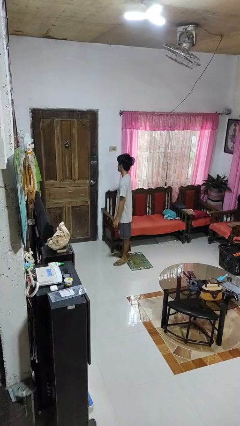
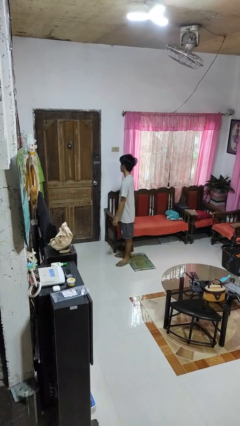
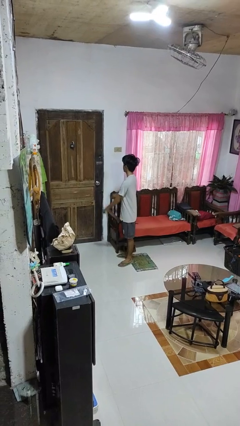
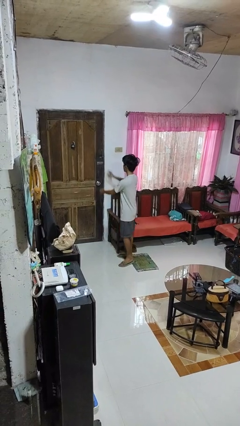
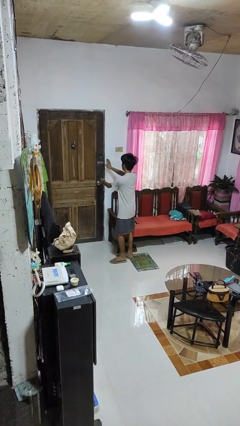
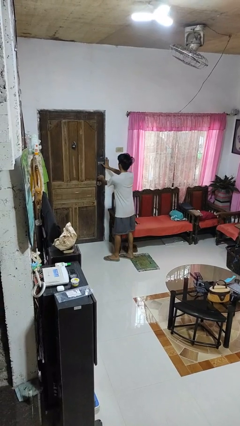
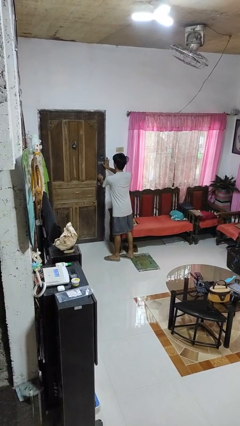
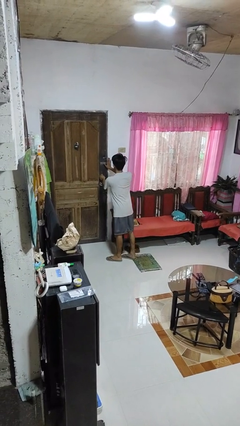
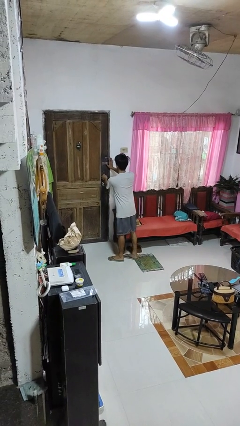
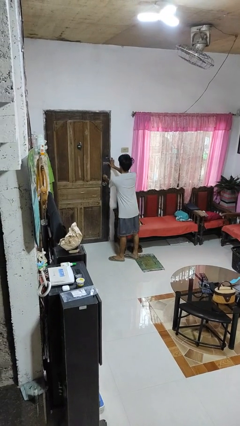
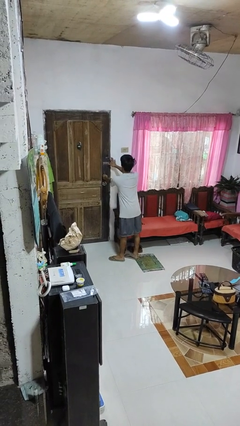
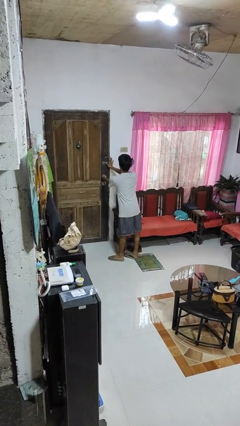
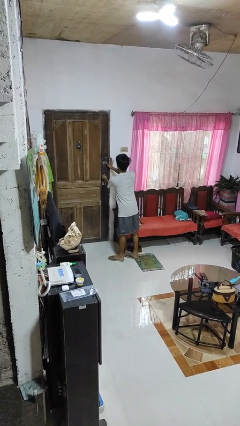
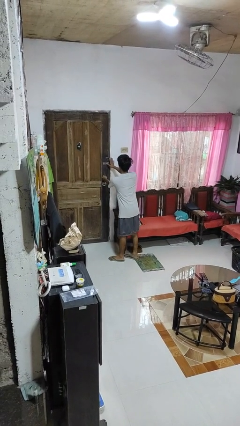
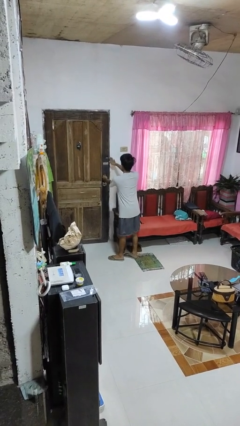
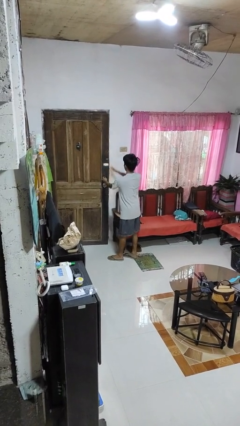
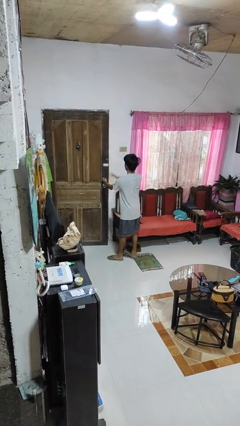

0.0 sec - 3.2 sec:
person unlocks door with keys

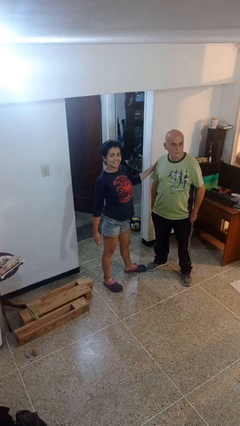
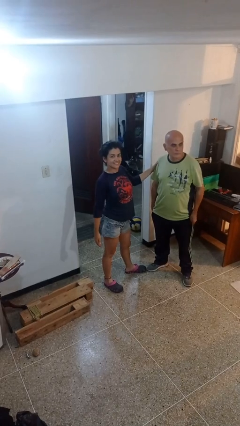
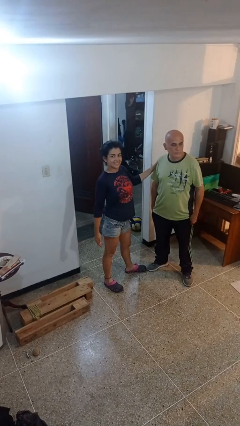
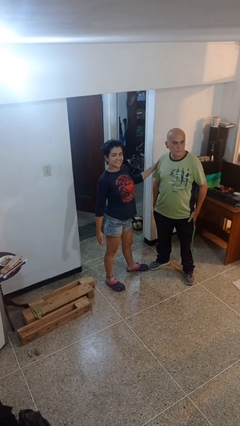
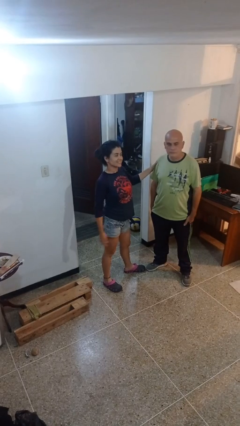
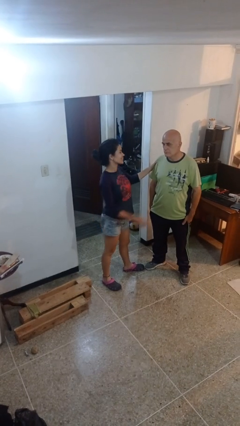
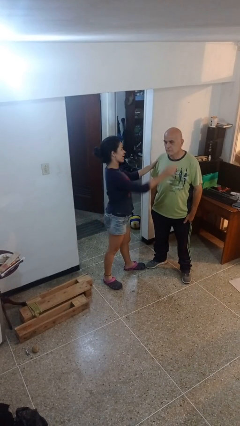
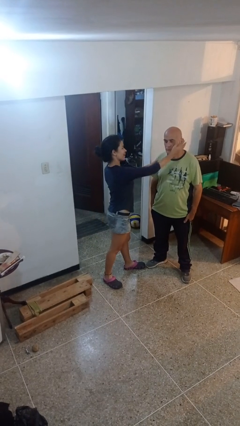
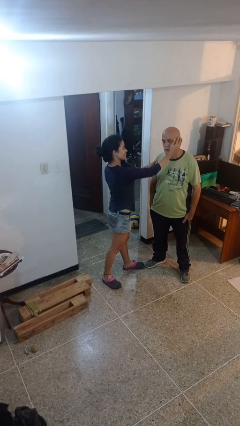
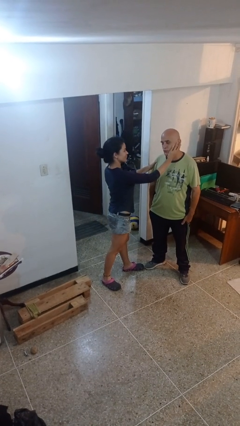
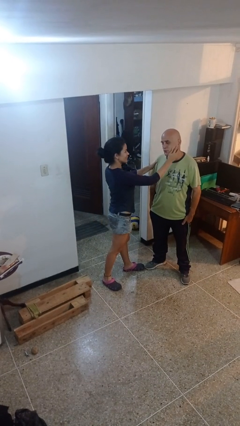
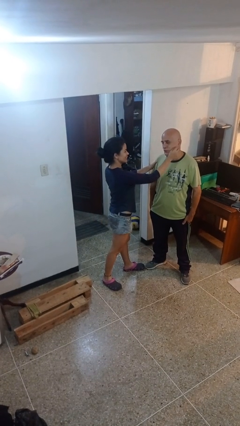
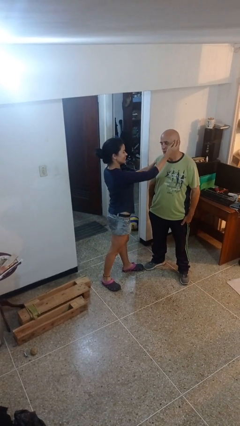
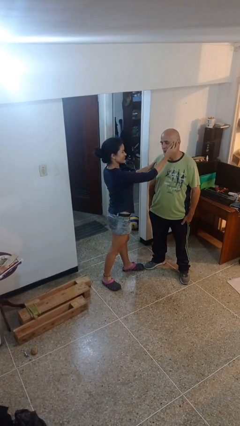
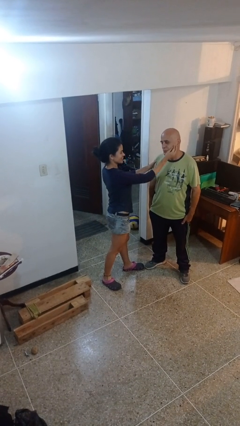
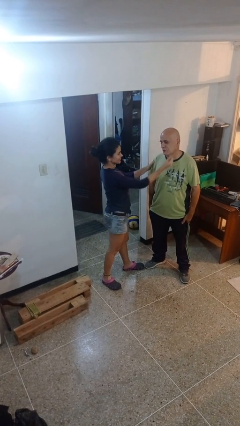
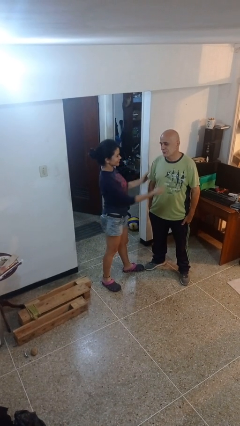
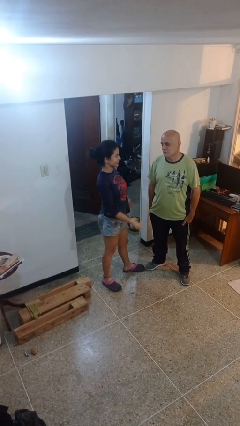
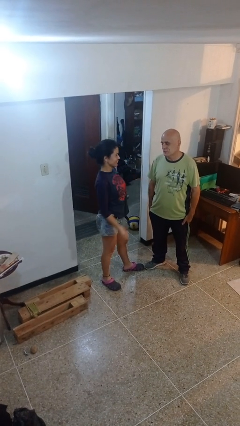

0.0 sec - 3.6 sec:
person touches face of person

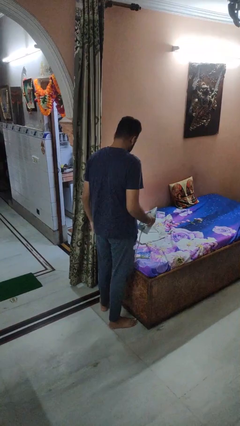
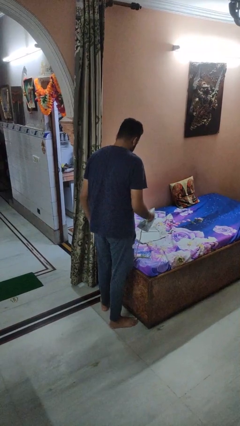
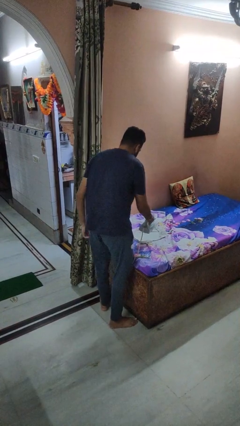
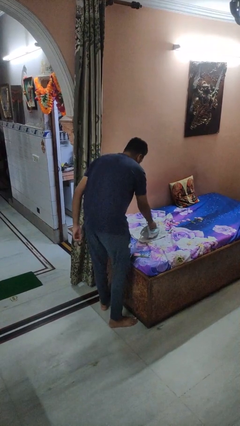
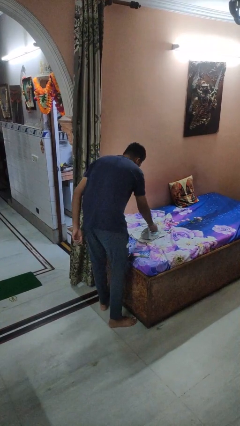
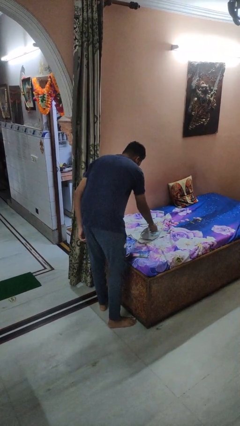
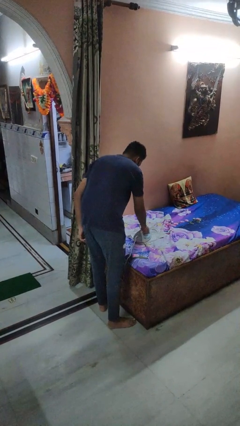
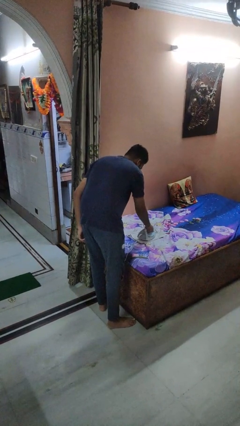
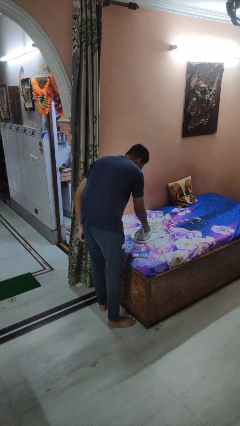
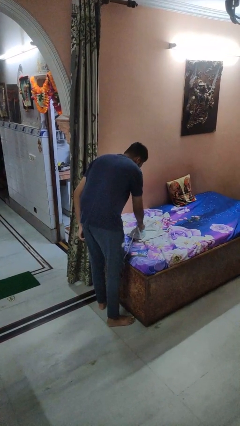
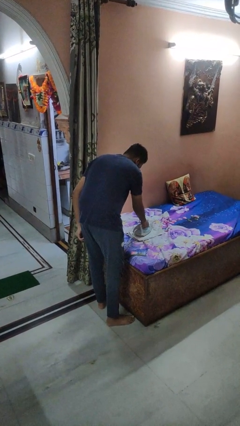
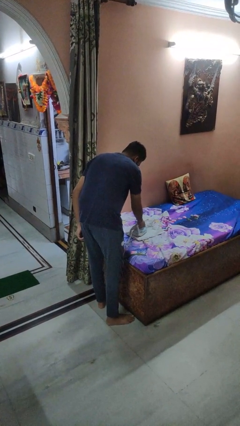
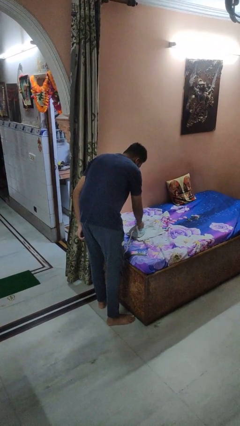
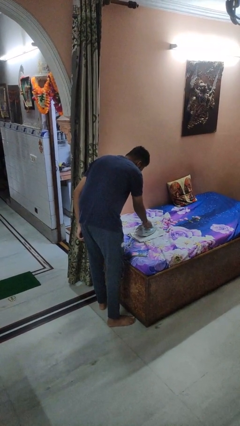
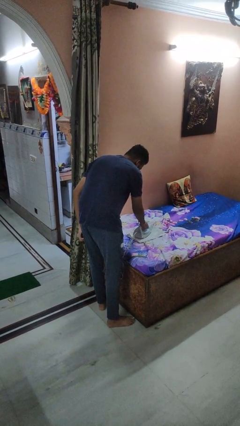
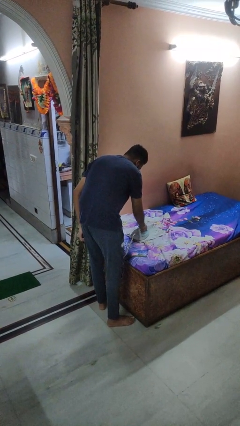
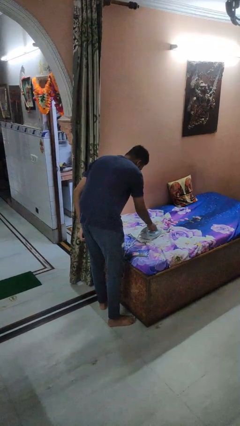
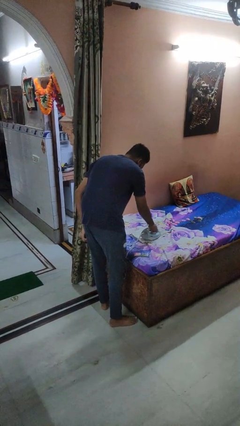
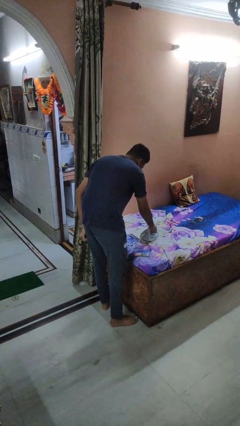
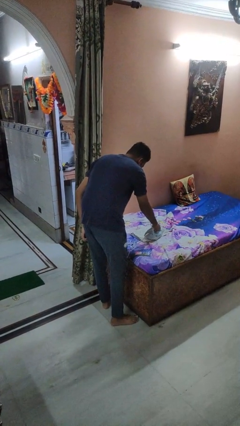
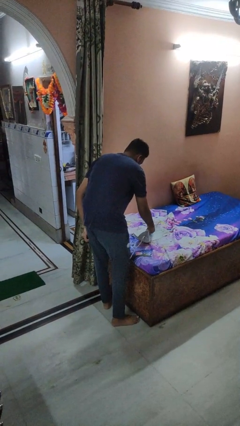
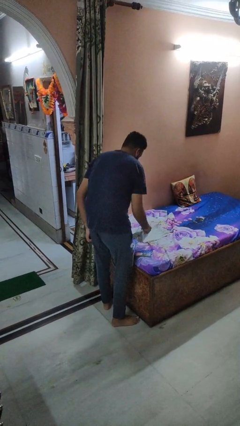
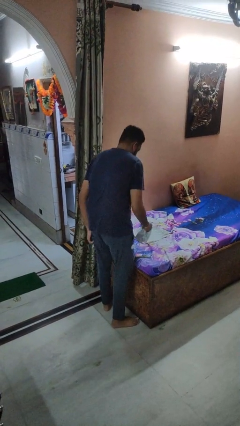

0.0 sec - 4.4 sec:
person irons clothes

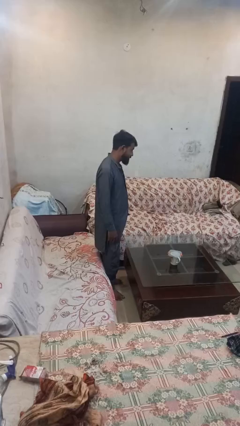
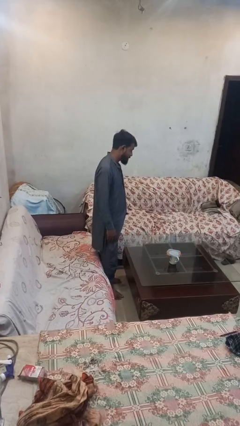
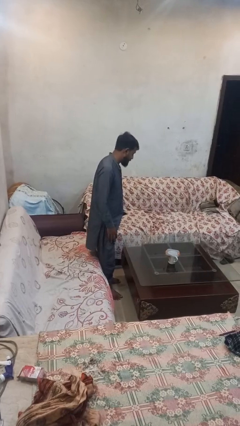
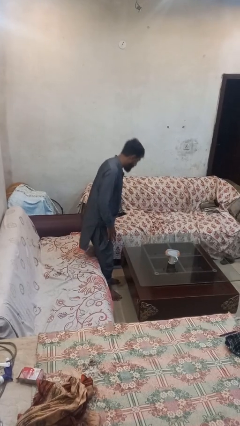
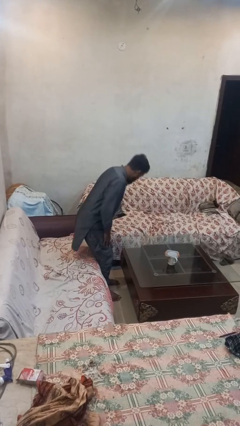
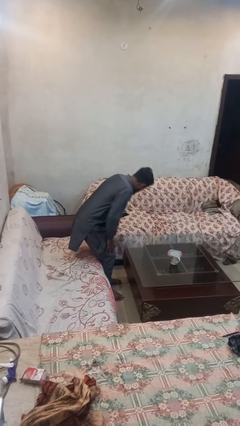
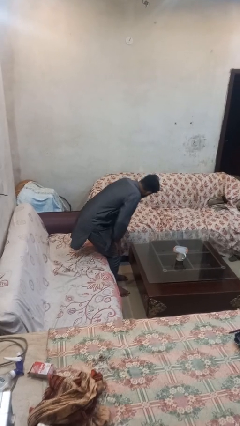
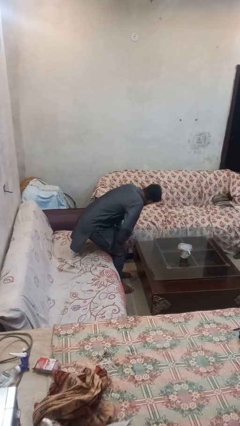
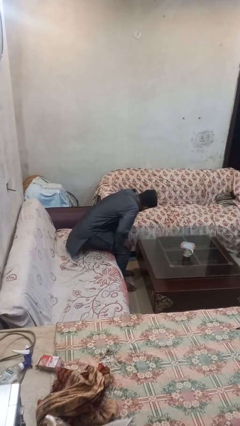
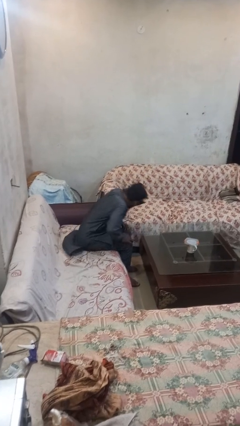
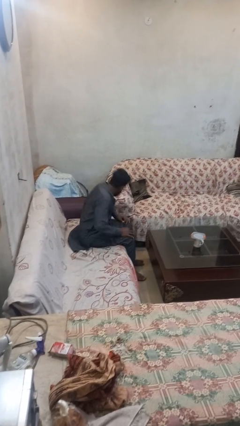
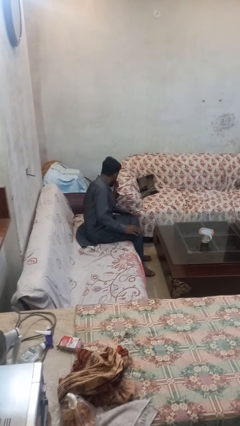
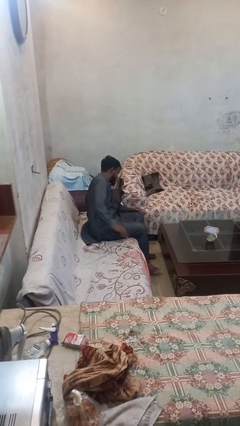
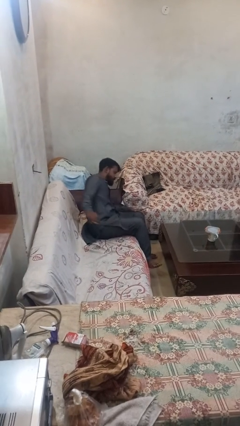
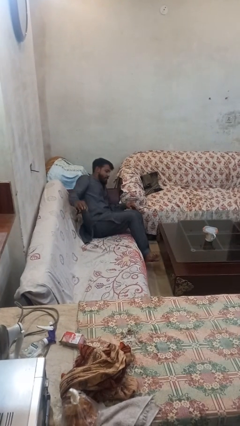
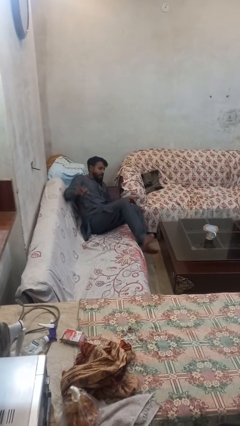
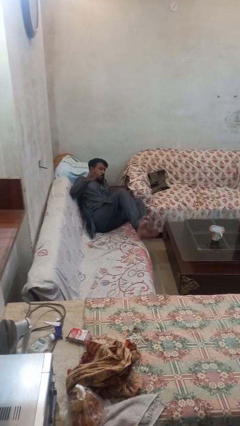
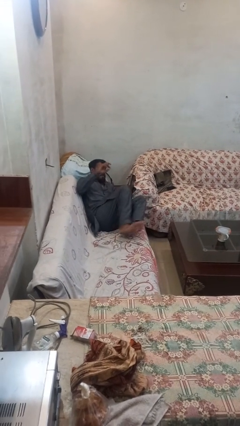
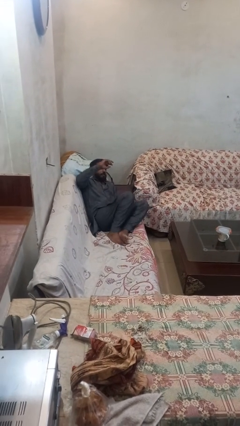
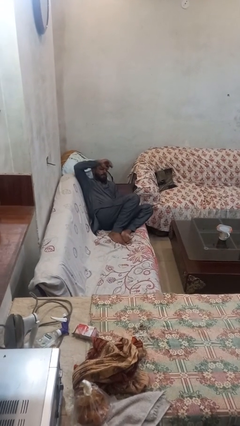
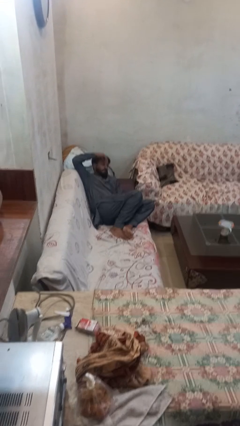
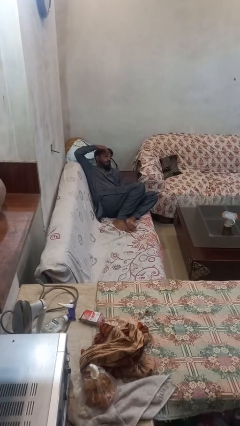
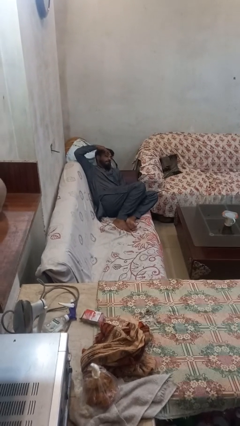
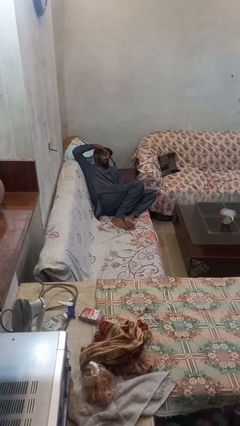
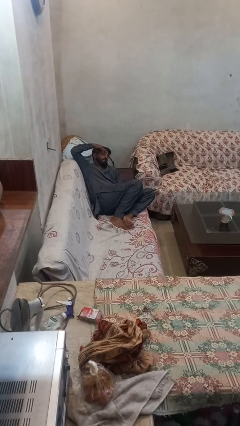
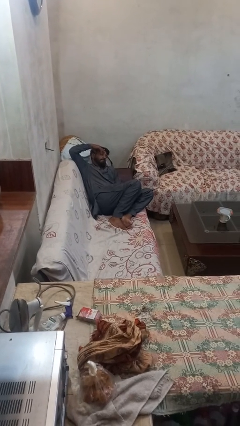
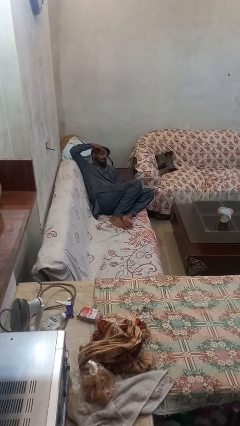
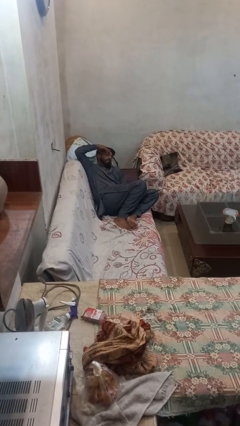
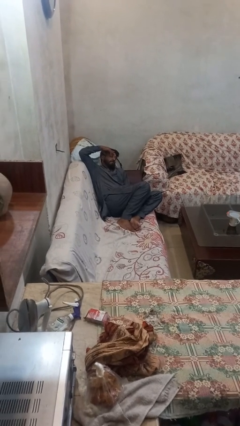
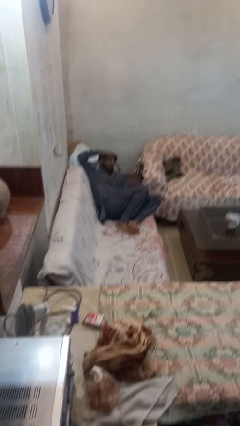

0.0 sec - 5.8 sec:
person lies down on couch

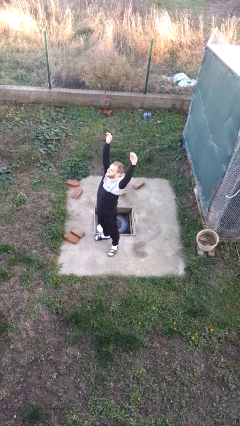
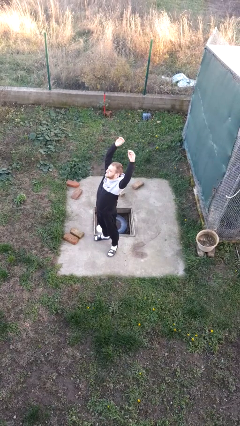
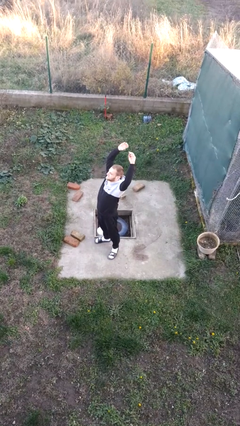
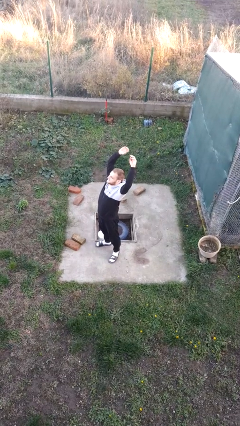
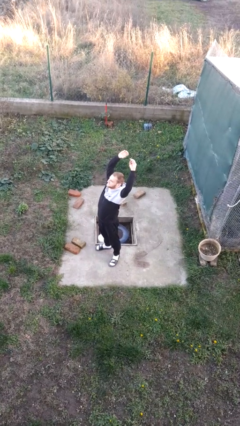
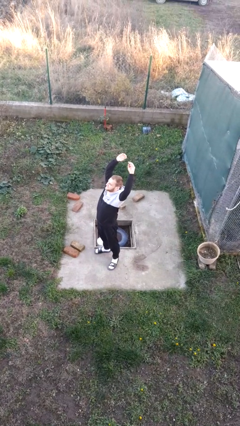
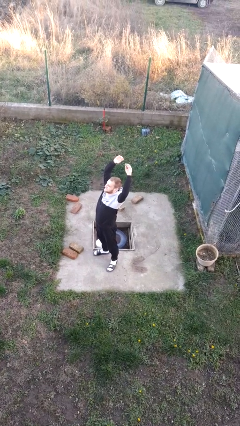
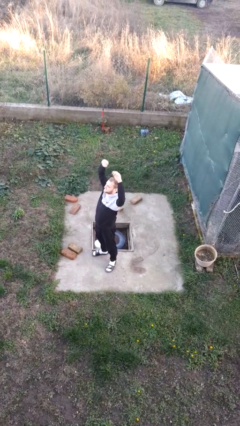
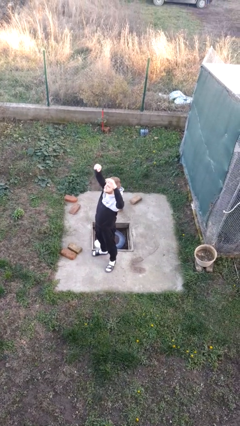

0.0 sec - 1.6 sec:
person stretches arms over head
